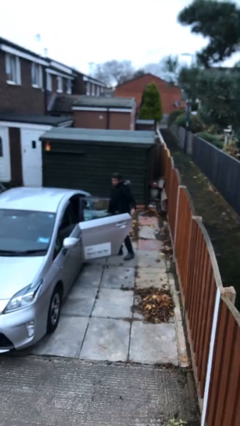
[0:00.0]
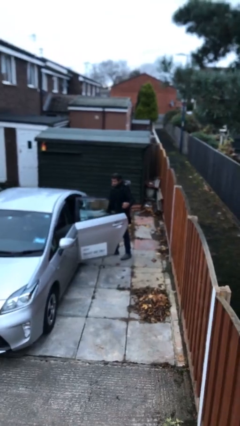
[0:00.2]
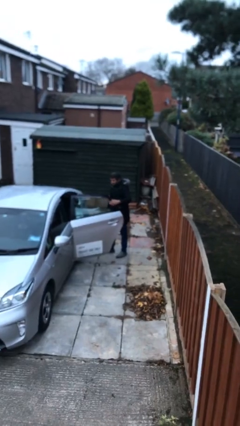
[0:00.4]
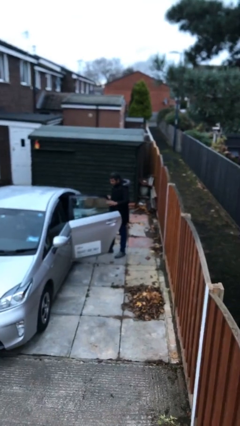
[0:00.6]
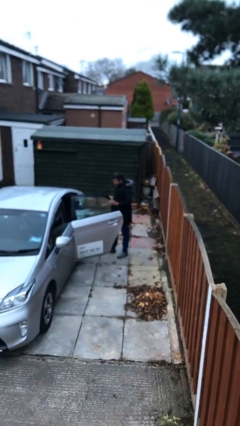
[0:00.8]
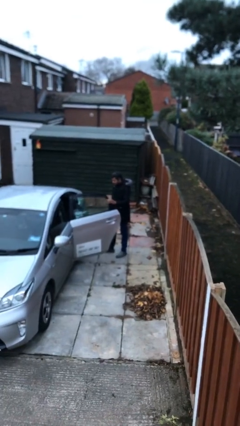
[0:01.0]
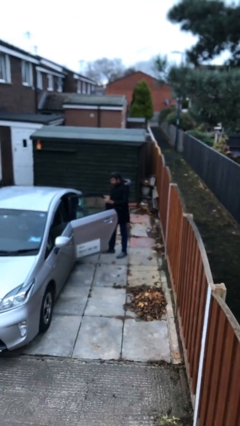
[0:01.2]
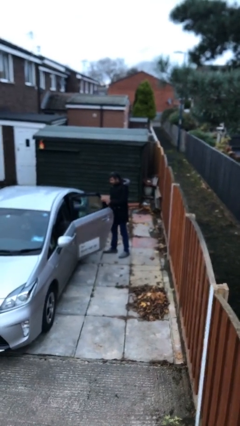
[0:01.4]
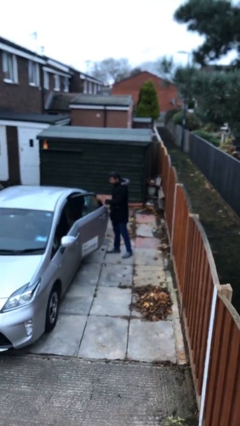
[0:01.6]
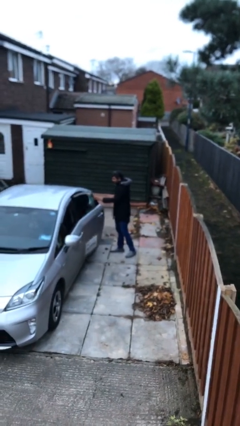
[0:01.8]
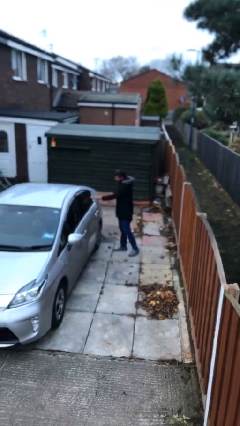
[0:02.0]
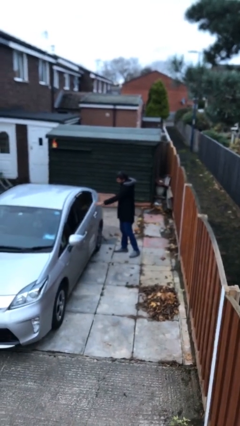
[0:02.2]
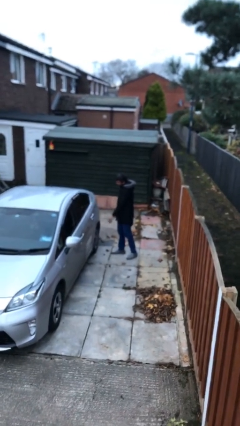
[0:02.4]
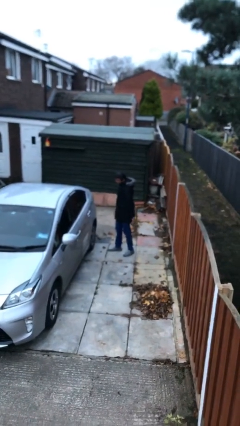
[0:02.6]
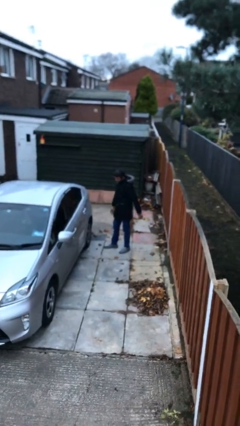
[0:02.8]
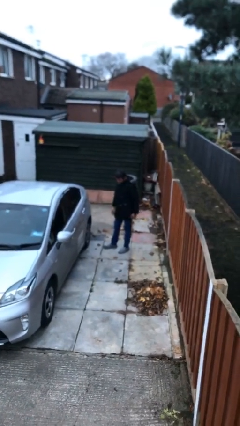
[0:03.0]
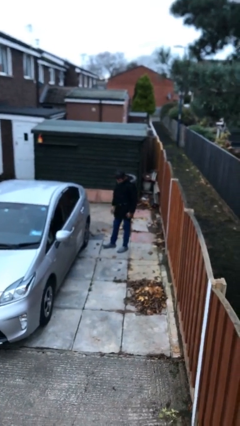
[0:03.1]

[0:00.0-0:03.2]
person closes car door

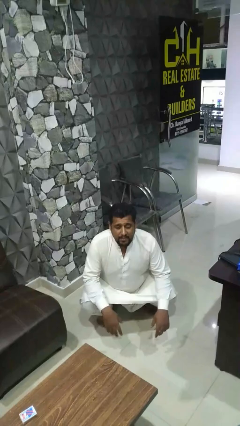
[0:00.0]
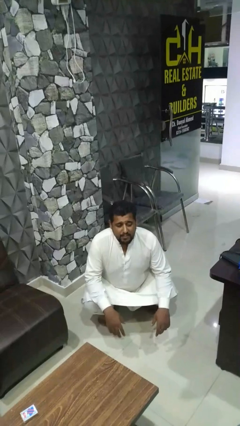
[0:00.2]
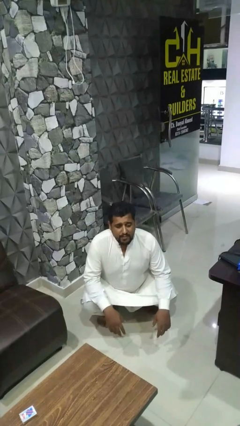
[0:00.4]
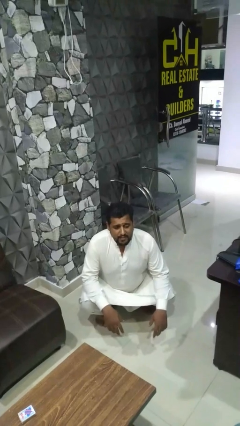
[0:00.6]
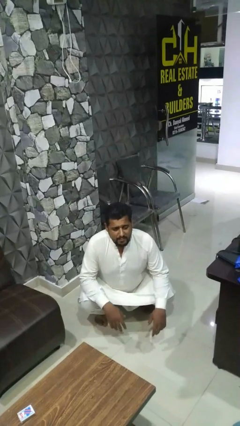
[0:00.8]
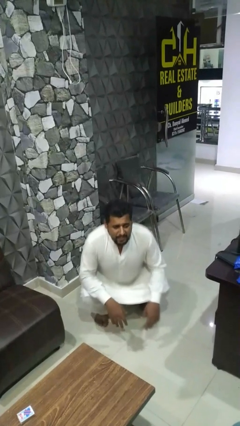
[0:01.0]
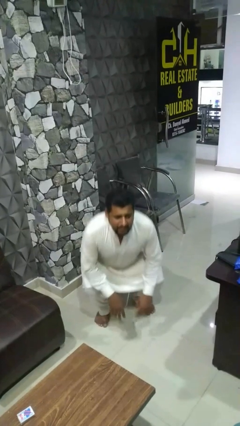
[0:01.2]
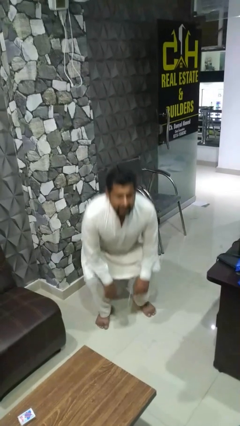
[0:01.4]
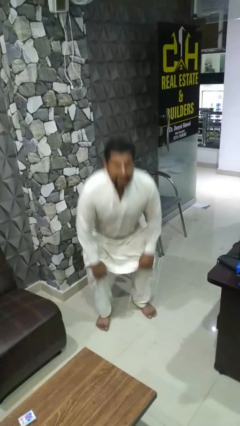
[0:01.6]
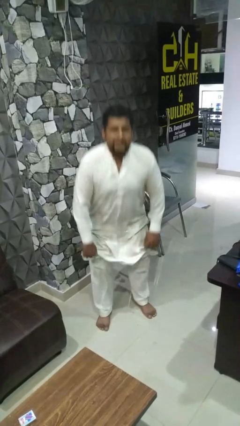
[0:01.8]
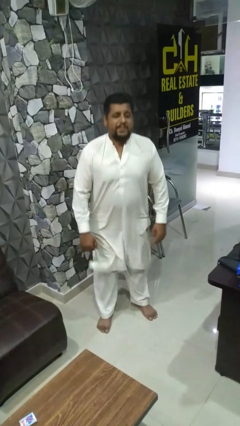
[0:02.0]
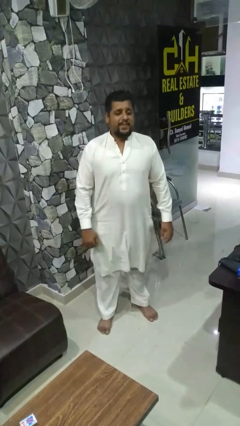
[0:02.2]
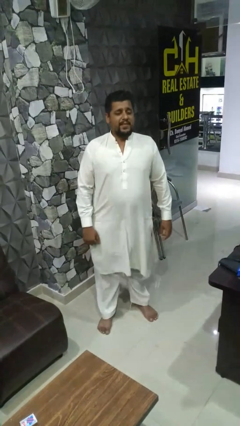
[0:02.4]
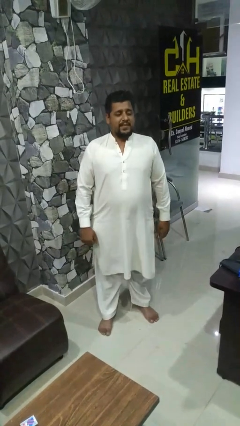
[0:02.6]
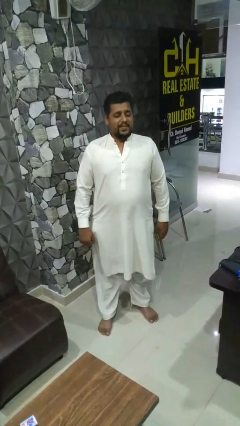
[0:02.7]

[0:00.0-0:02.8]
person stands up

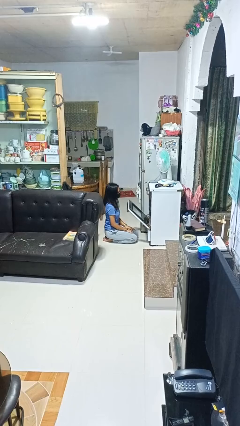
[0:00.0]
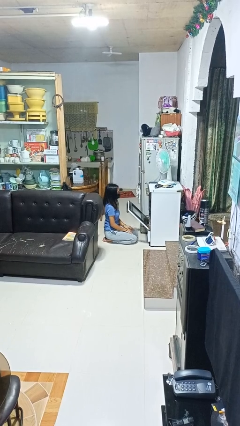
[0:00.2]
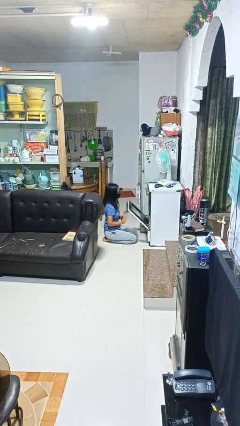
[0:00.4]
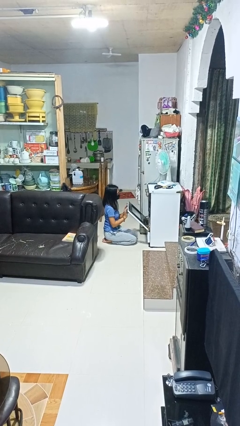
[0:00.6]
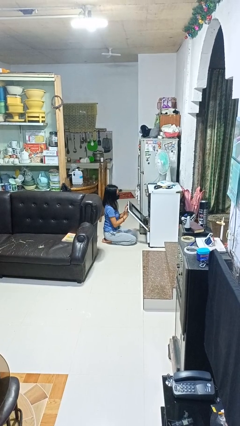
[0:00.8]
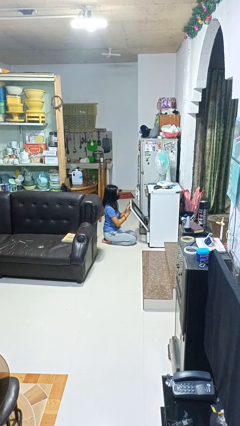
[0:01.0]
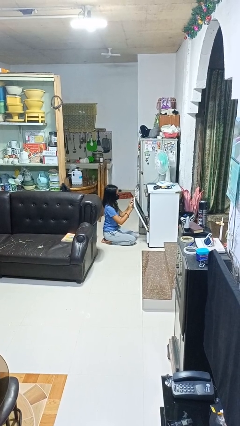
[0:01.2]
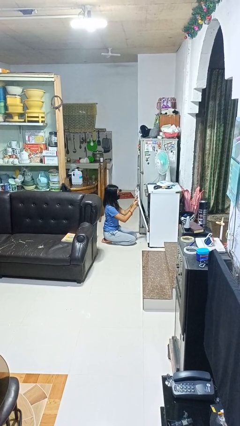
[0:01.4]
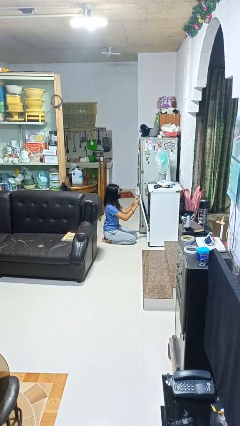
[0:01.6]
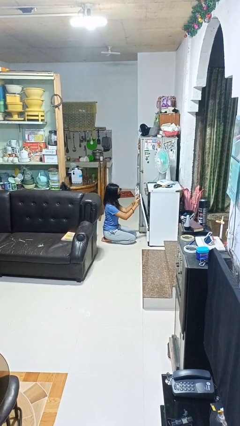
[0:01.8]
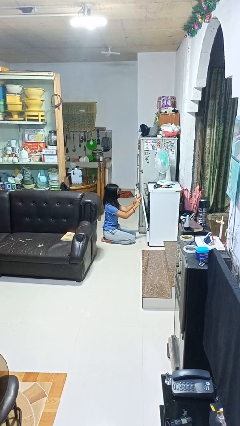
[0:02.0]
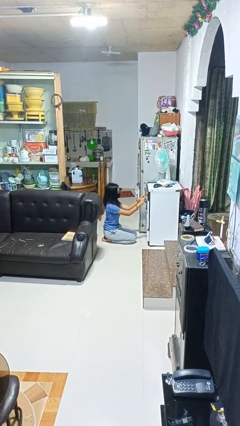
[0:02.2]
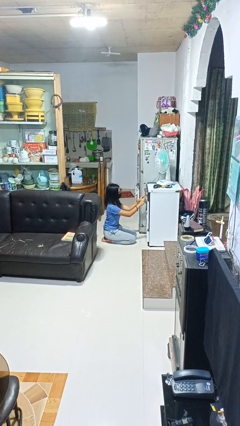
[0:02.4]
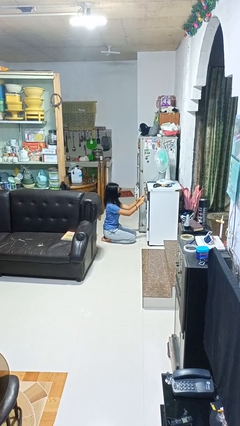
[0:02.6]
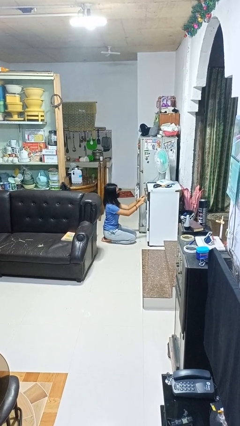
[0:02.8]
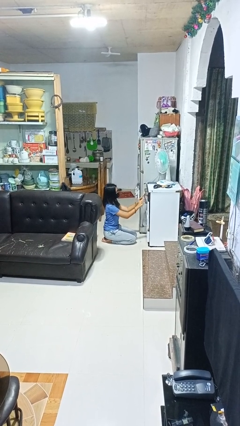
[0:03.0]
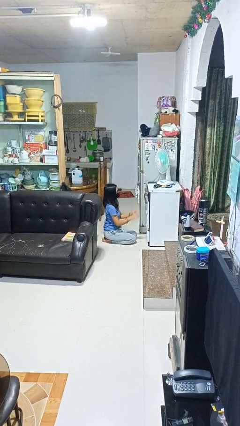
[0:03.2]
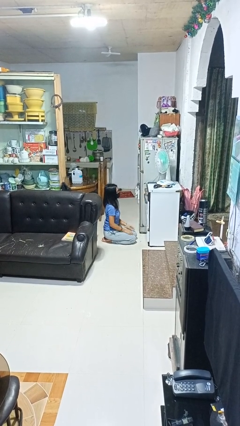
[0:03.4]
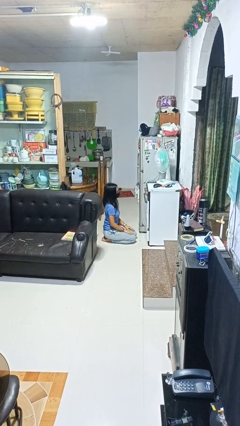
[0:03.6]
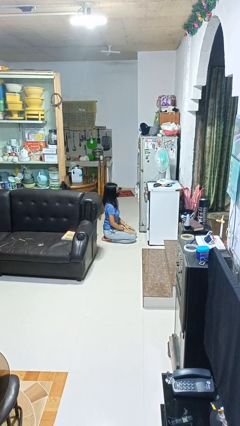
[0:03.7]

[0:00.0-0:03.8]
person closes oven door

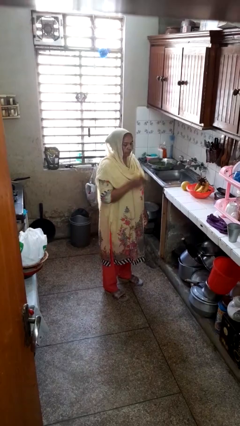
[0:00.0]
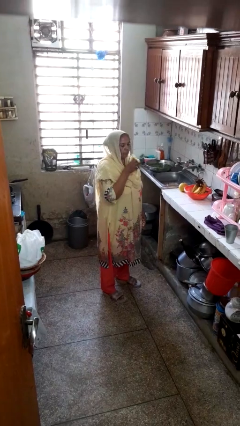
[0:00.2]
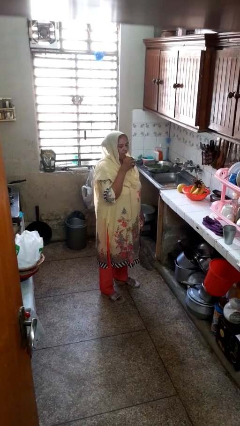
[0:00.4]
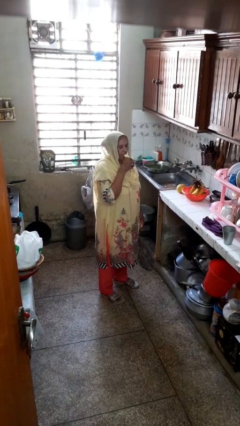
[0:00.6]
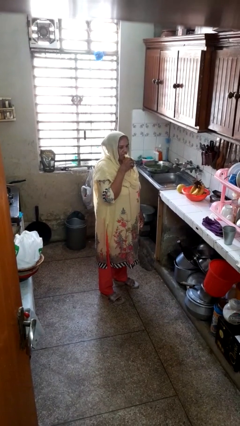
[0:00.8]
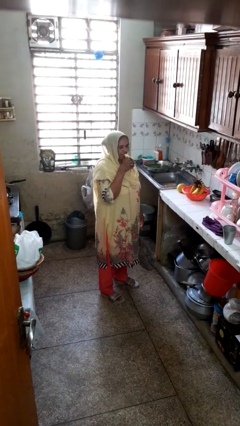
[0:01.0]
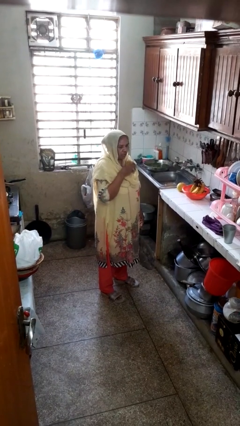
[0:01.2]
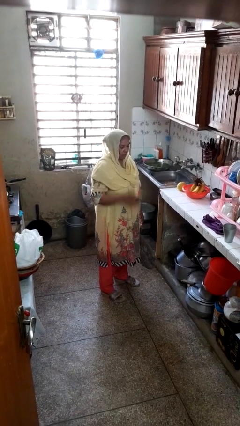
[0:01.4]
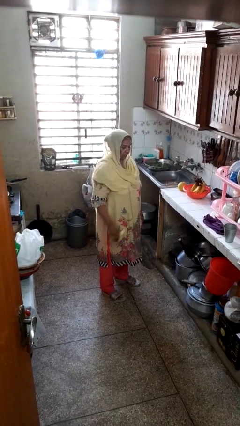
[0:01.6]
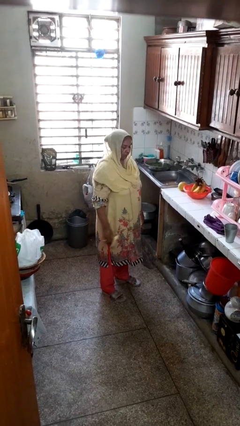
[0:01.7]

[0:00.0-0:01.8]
person eats banana

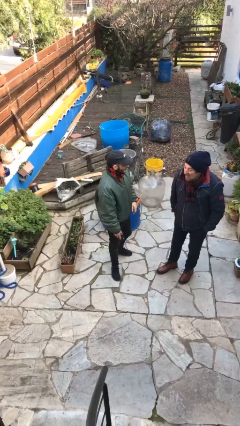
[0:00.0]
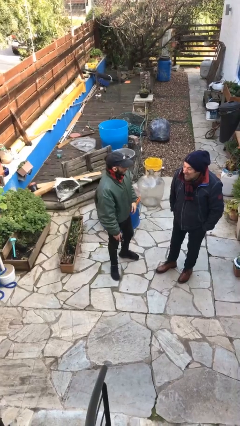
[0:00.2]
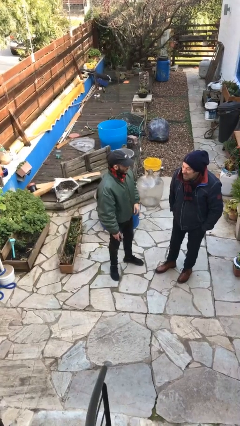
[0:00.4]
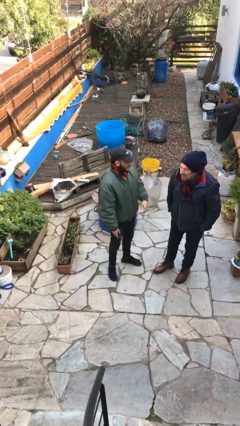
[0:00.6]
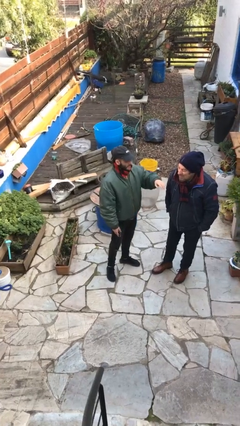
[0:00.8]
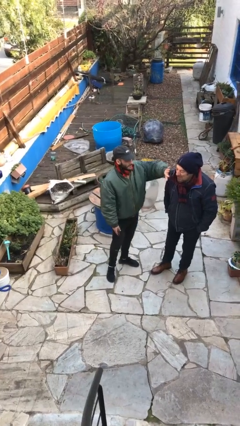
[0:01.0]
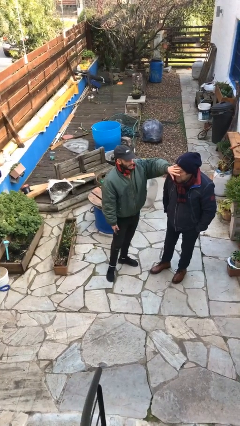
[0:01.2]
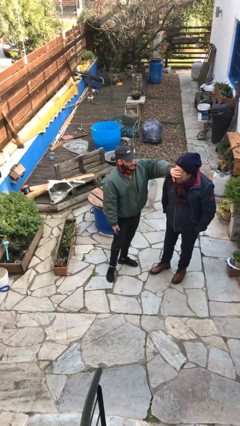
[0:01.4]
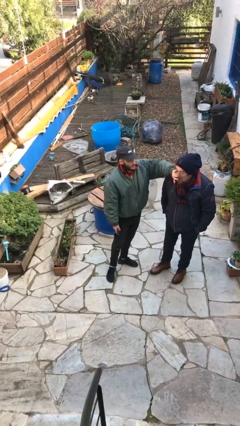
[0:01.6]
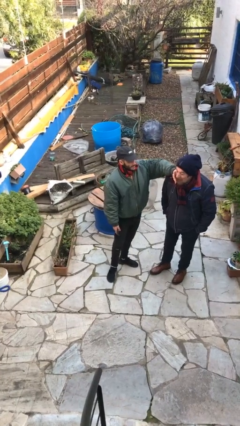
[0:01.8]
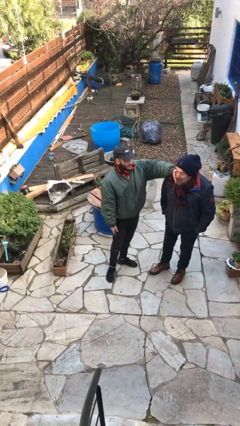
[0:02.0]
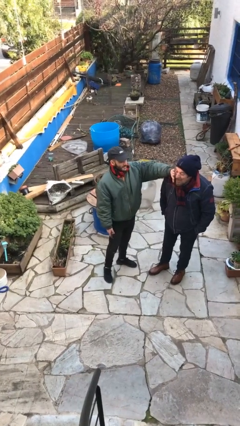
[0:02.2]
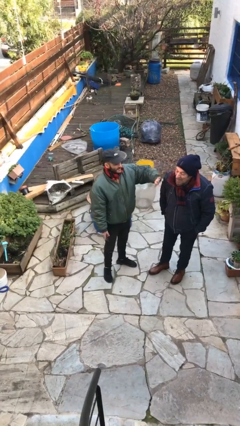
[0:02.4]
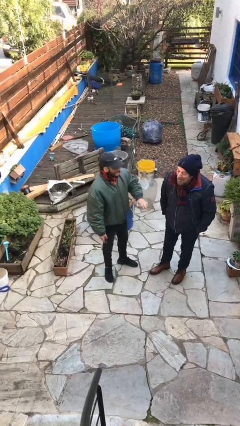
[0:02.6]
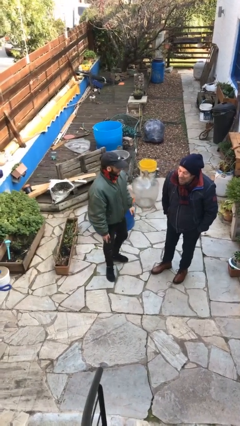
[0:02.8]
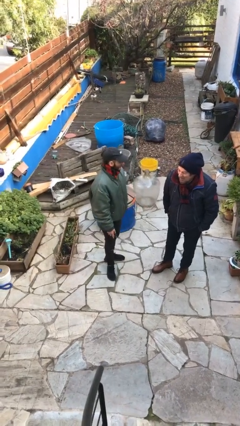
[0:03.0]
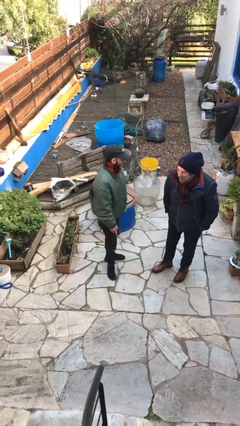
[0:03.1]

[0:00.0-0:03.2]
person touches face of person

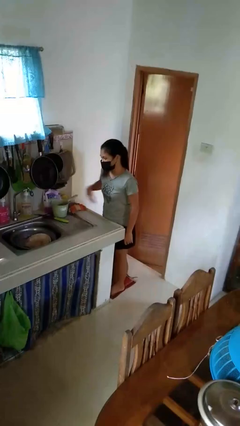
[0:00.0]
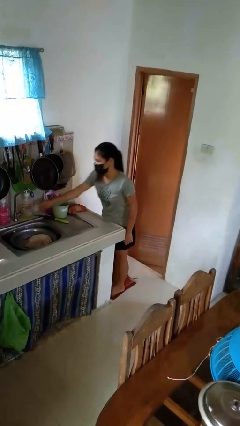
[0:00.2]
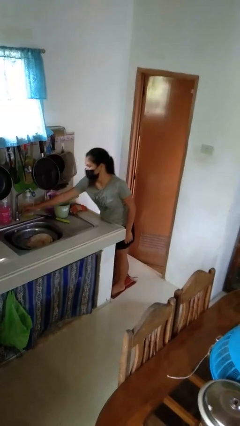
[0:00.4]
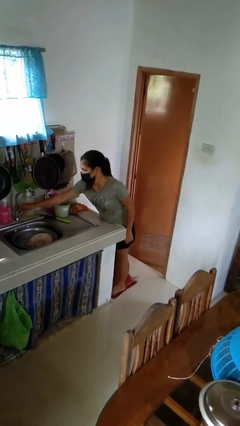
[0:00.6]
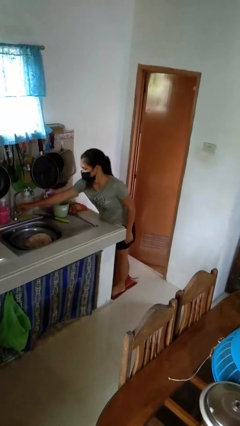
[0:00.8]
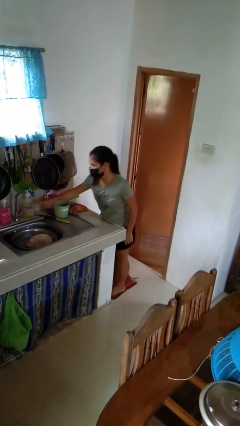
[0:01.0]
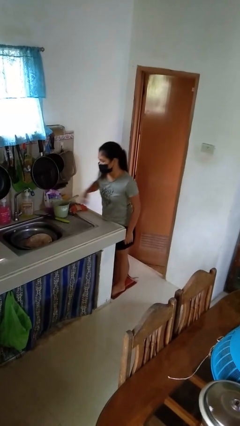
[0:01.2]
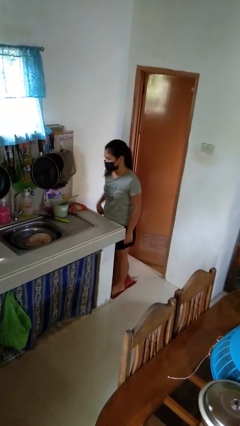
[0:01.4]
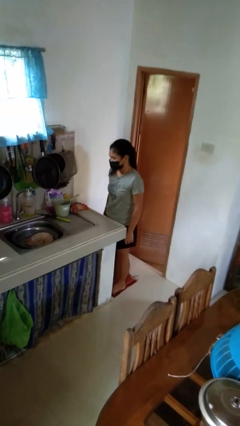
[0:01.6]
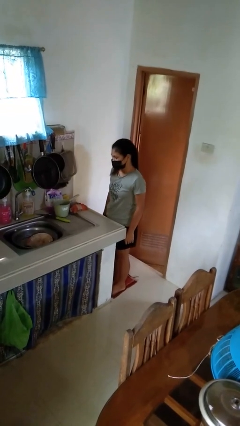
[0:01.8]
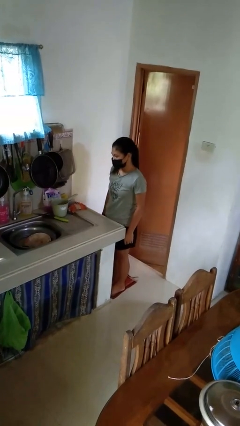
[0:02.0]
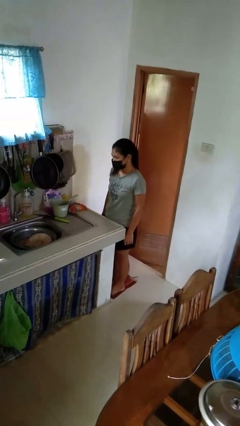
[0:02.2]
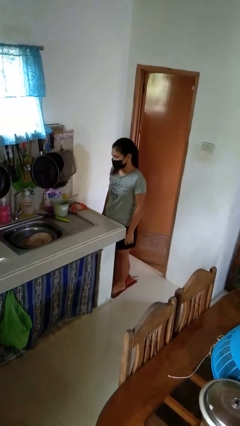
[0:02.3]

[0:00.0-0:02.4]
person turns off faucet
